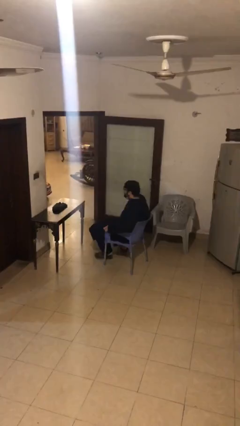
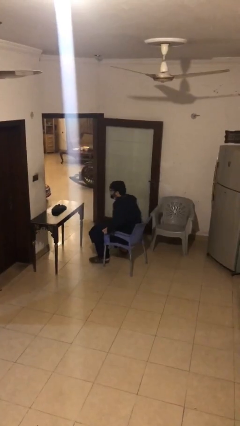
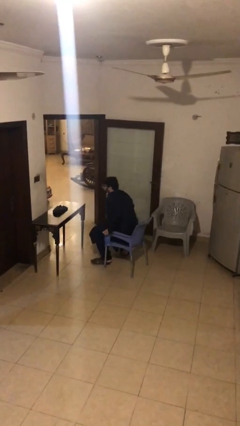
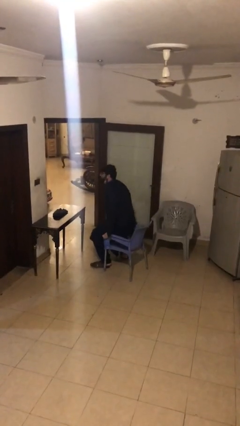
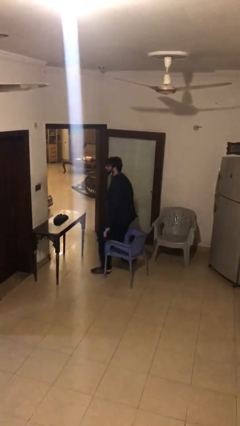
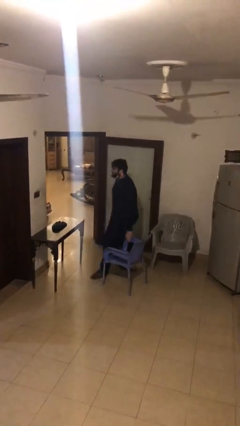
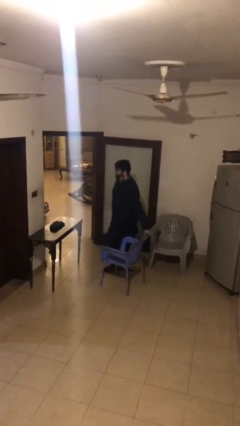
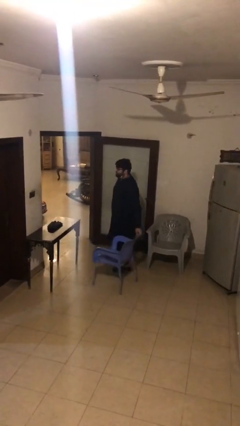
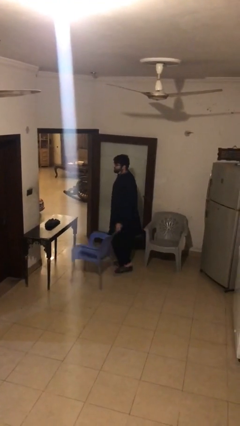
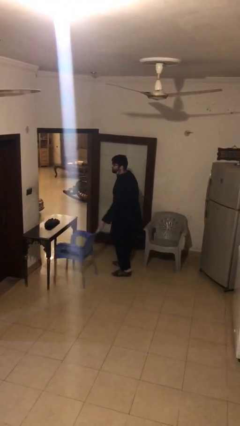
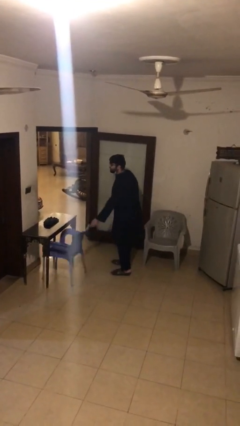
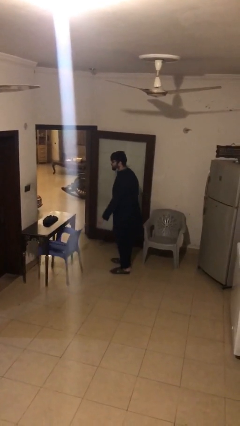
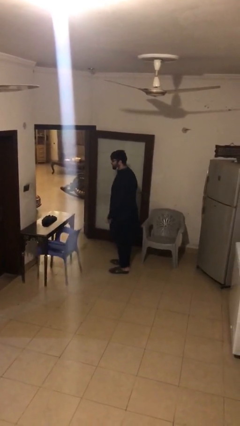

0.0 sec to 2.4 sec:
person stands up

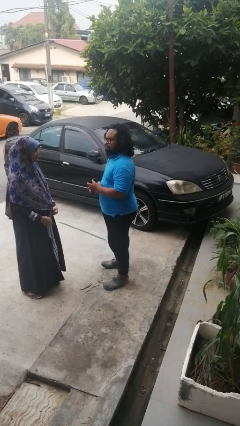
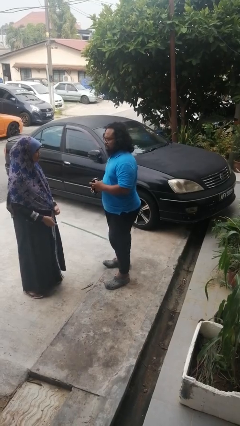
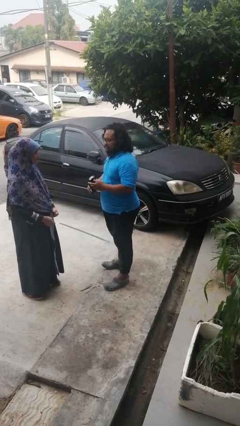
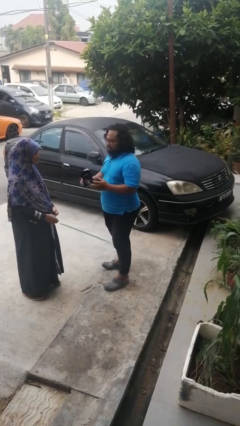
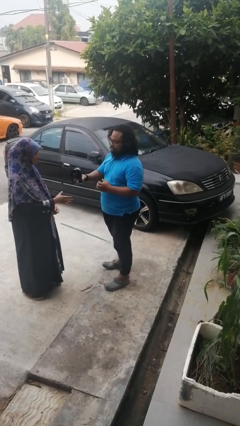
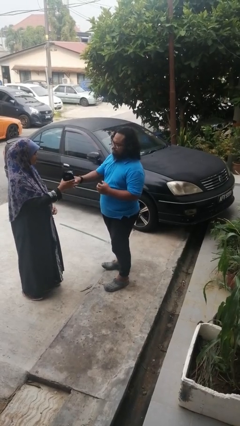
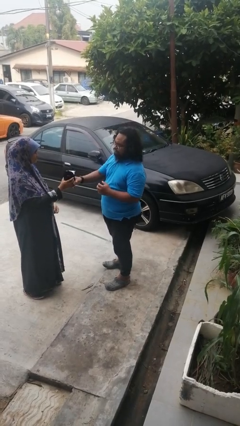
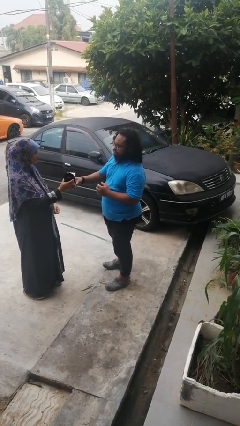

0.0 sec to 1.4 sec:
person transfers object to person

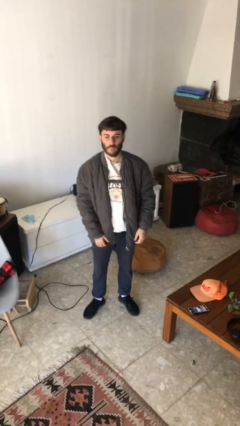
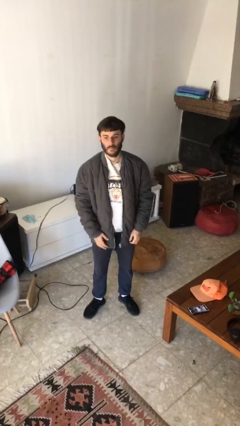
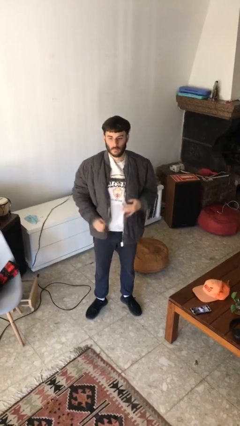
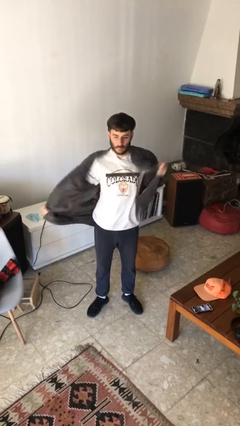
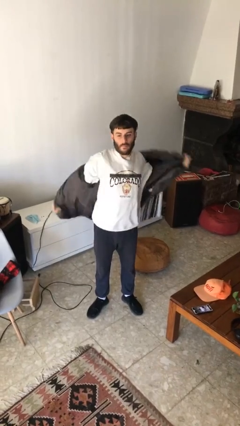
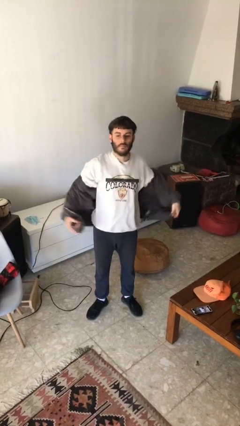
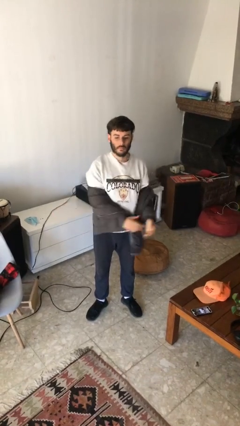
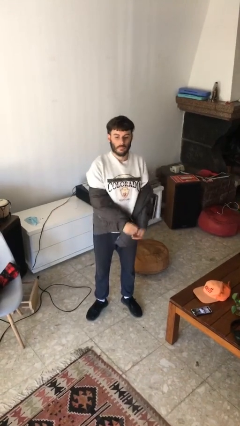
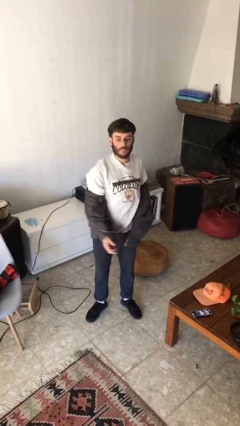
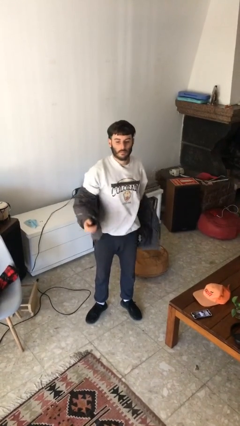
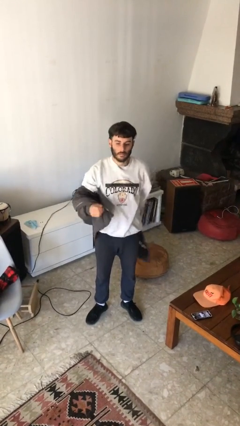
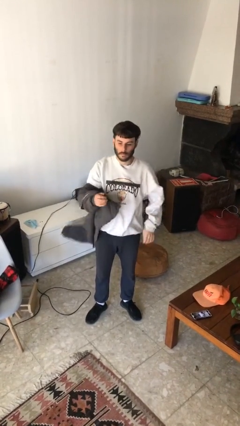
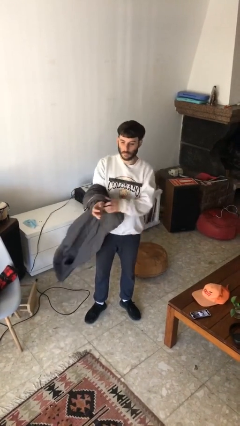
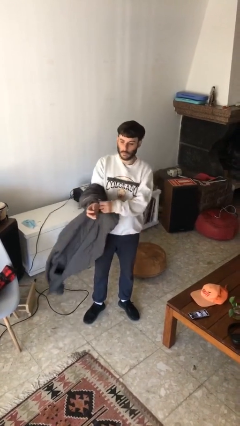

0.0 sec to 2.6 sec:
person takes off jacket

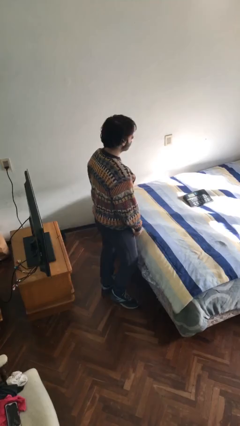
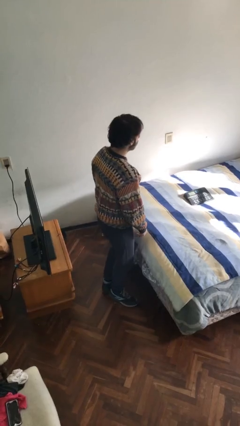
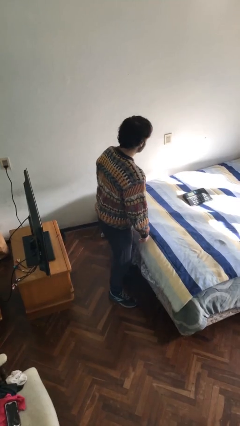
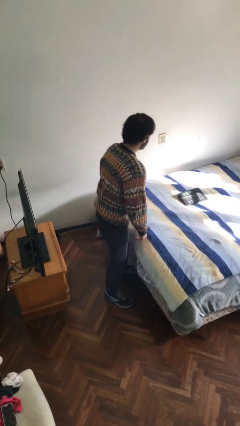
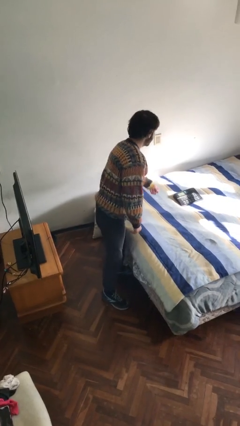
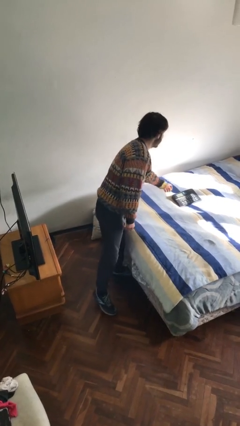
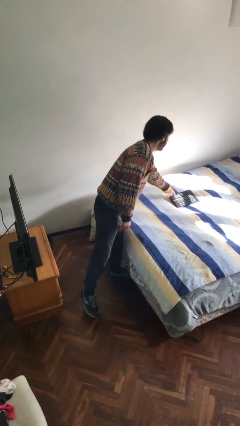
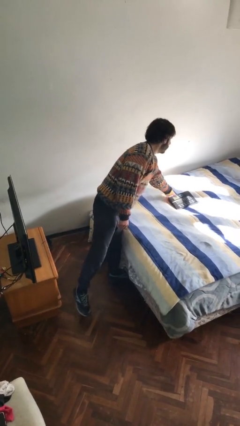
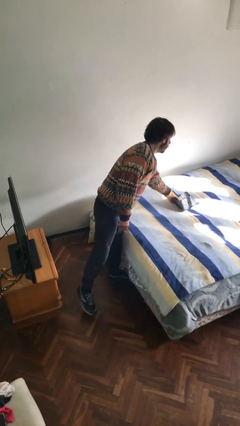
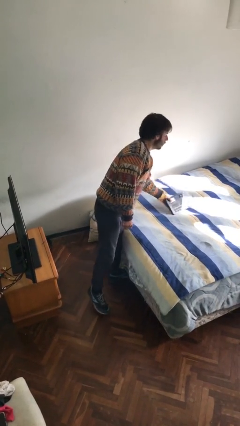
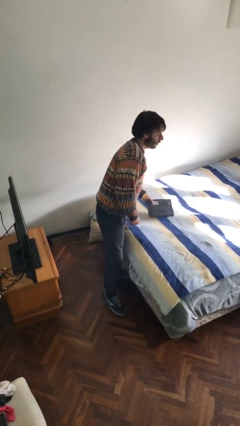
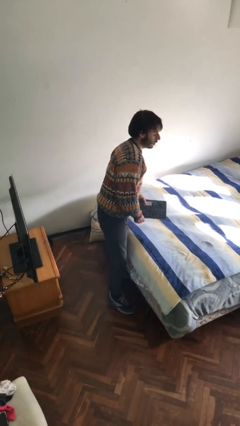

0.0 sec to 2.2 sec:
person picks up object from bed

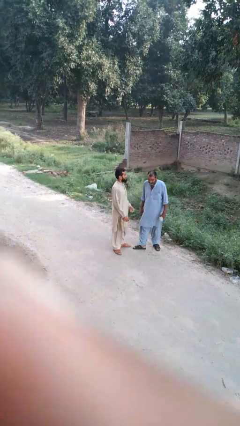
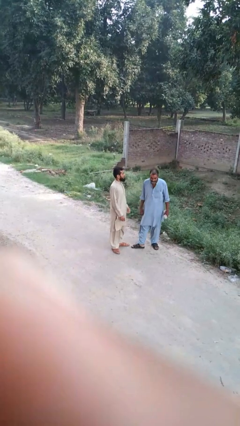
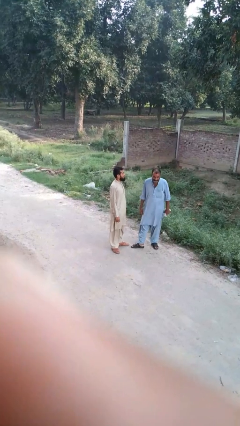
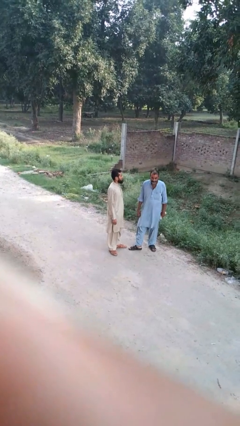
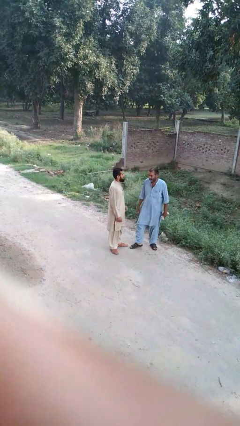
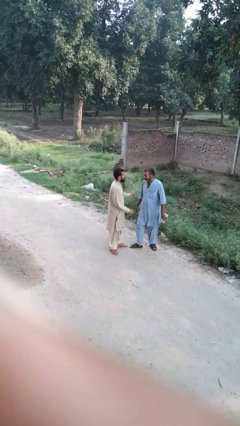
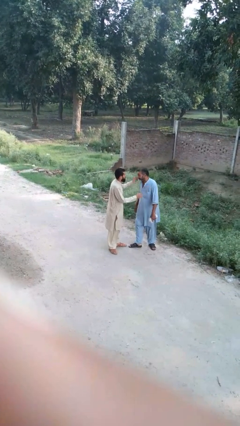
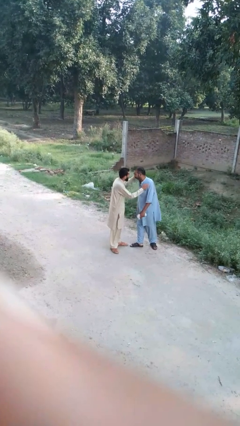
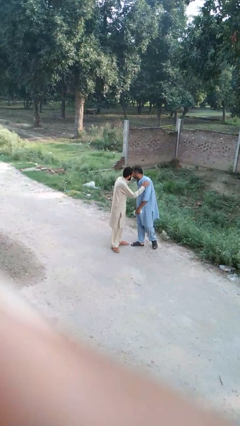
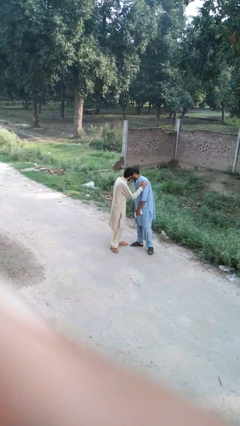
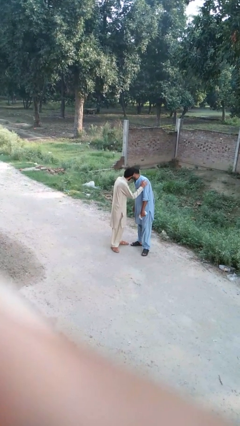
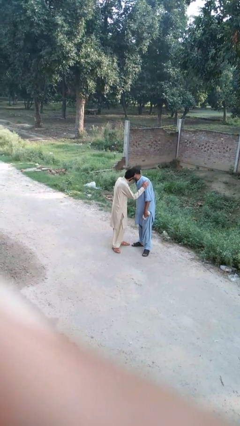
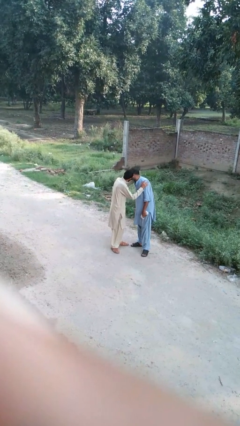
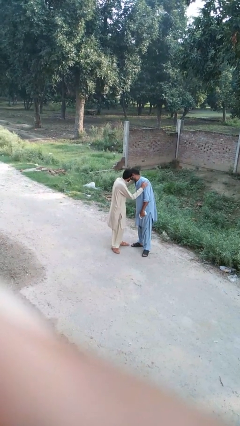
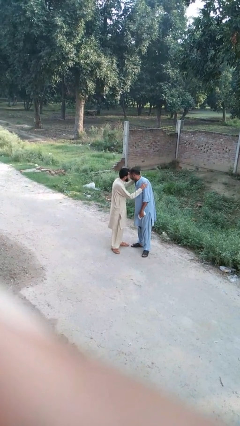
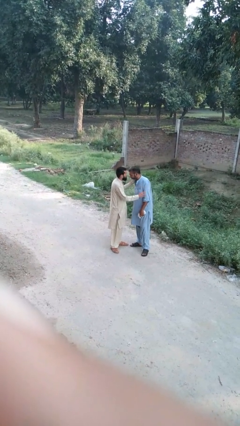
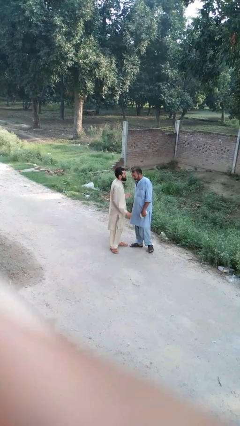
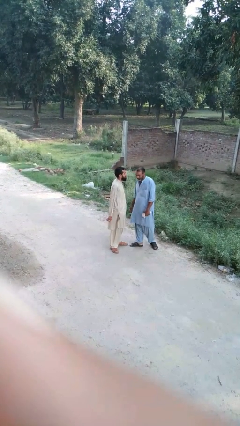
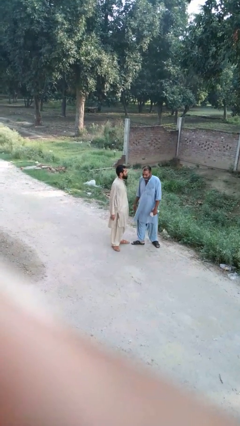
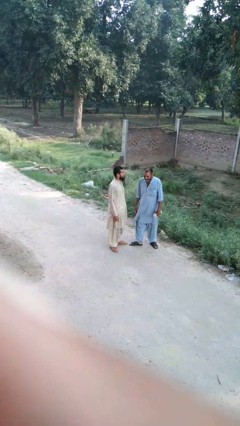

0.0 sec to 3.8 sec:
person kisses cheek of person

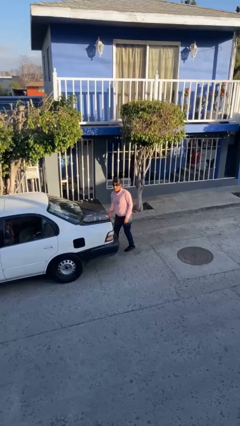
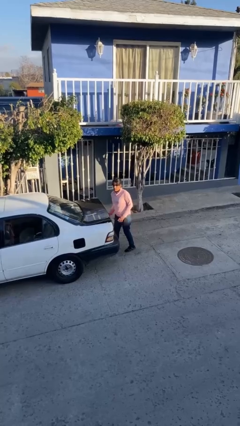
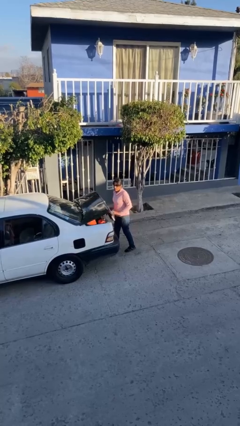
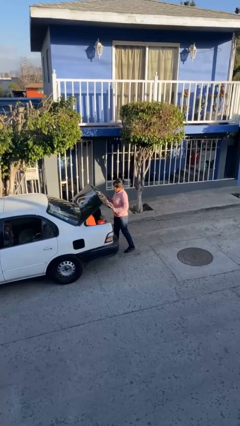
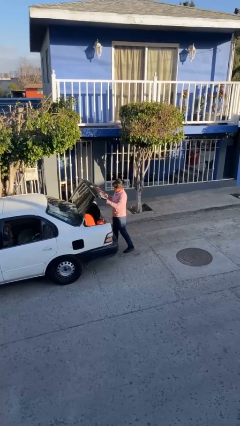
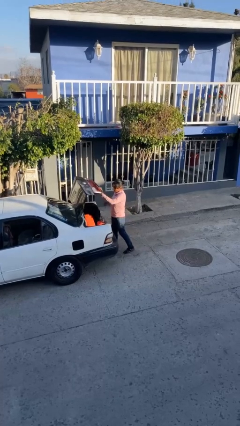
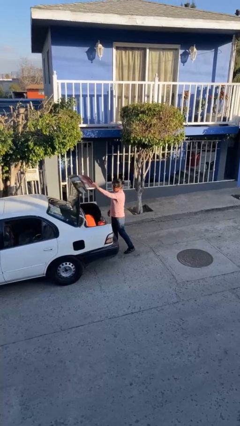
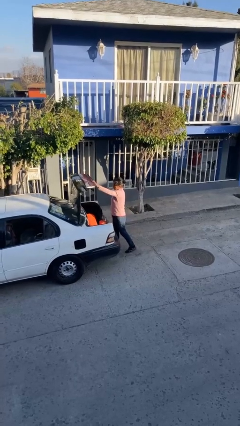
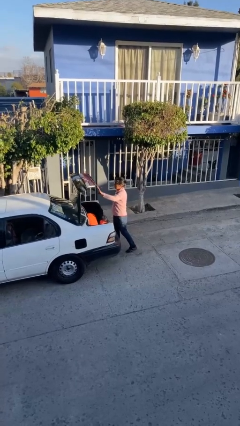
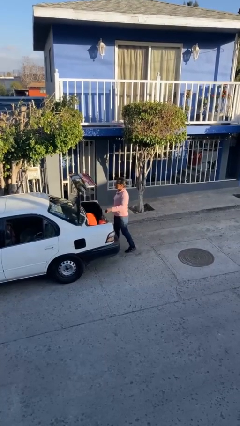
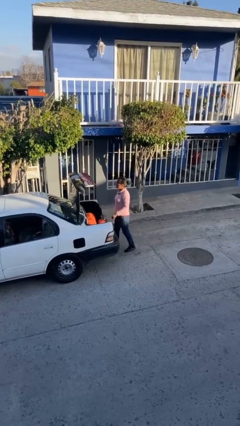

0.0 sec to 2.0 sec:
person opens car trunk

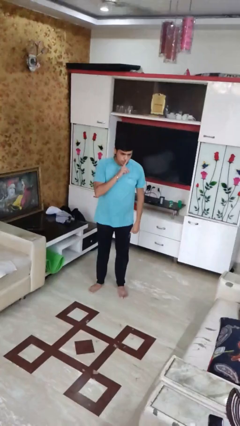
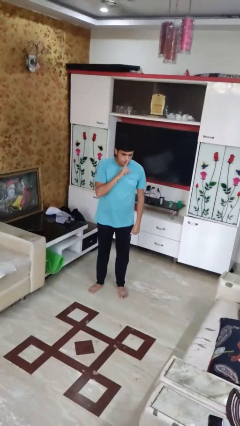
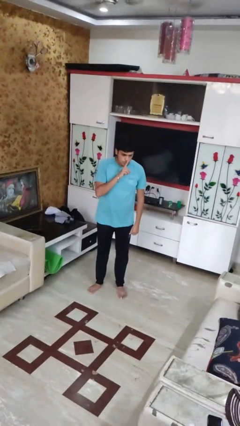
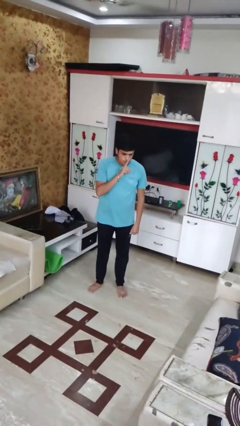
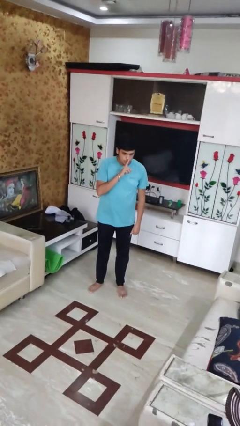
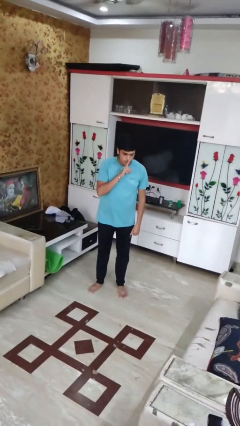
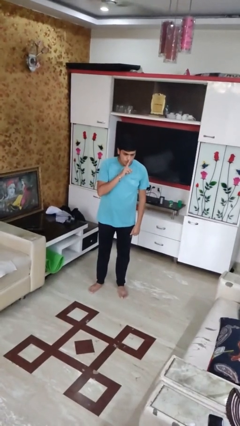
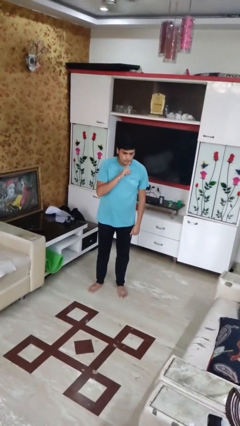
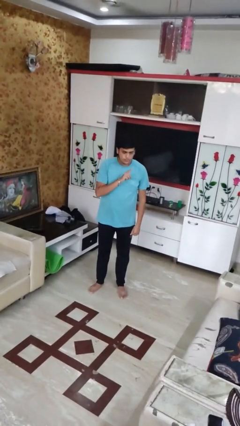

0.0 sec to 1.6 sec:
person gestures be quiet

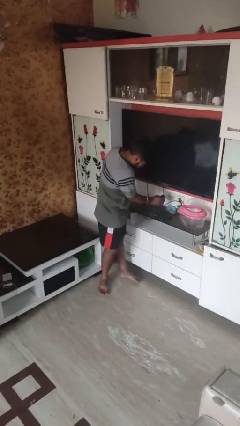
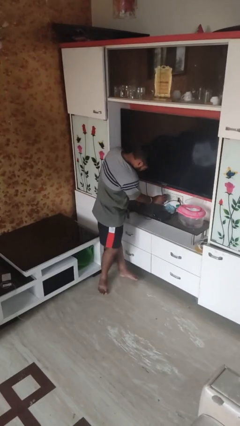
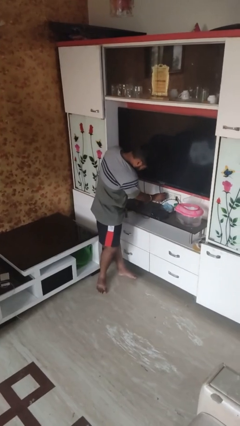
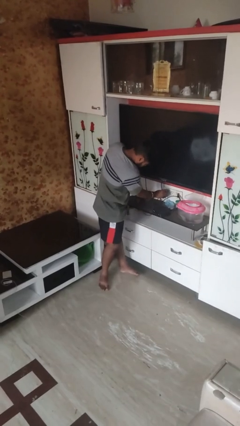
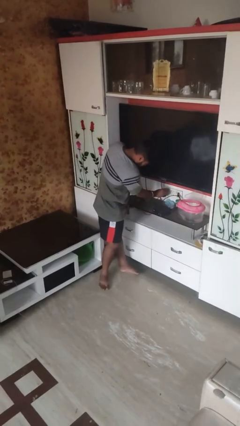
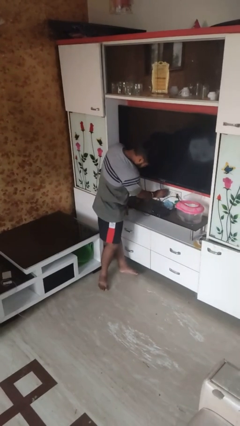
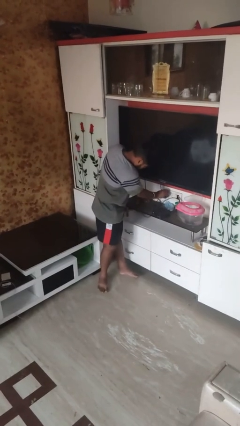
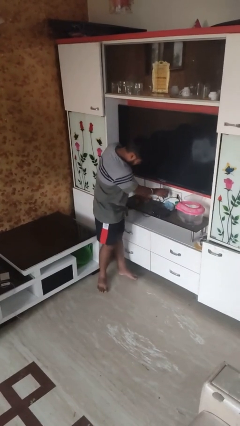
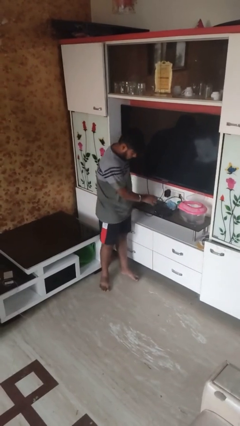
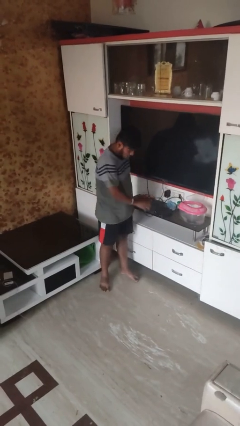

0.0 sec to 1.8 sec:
person plugs into electrical socket
